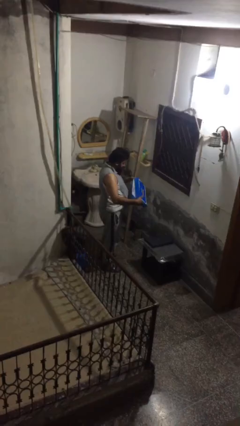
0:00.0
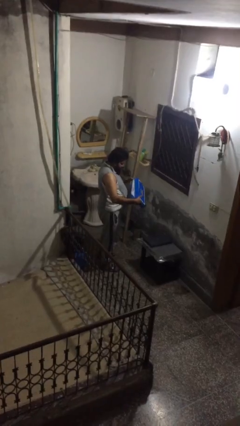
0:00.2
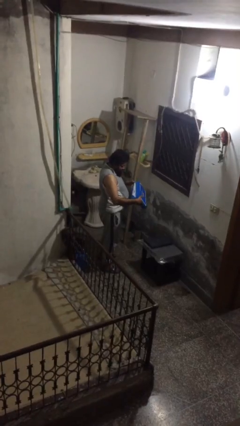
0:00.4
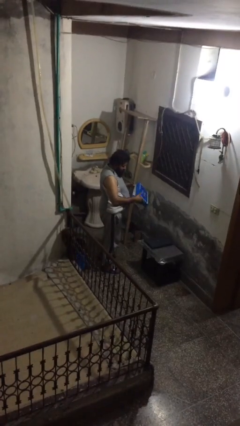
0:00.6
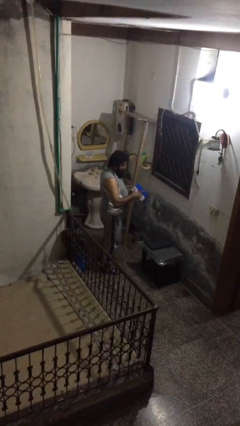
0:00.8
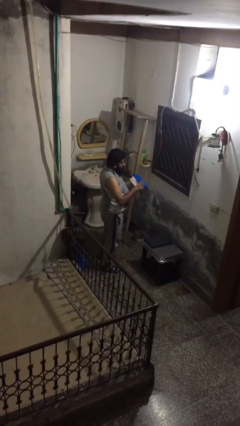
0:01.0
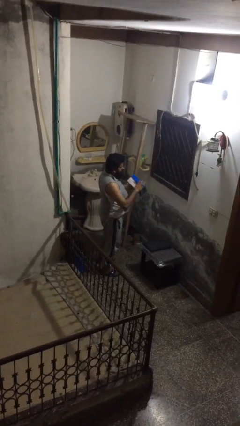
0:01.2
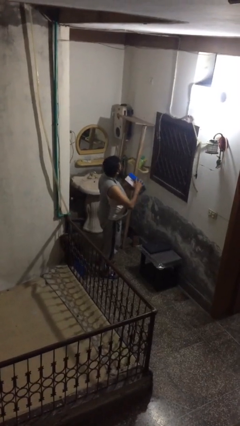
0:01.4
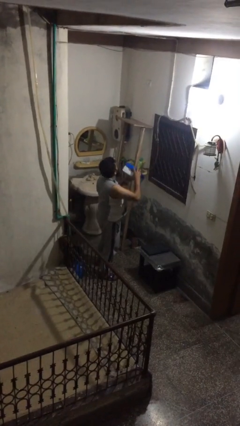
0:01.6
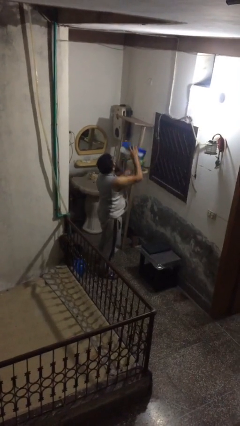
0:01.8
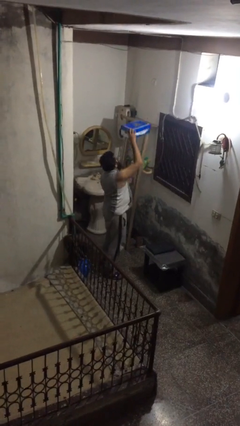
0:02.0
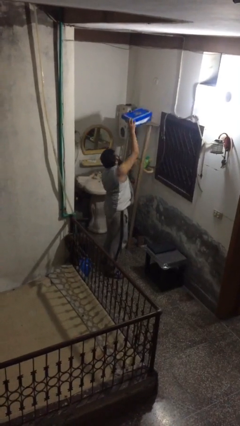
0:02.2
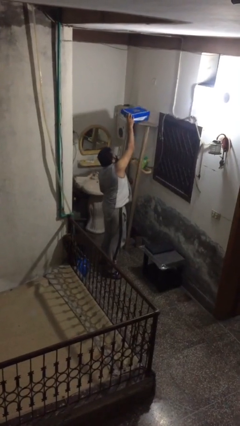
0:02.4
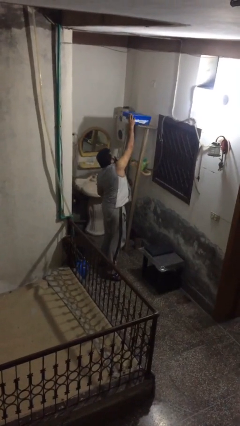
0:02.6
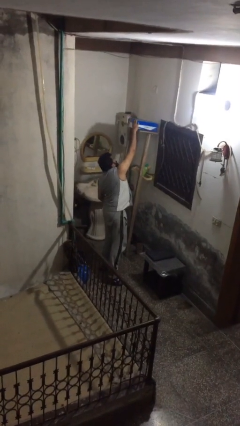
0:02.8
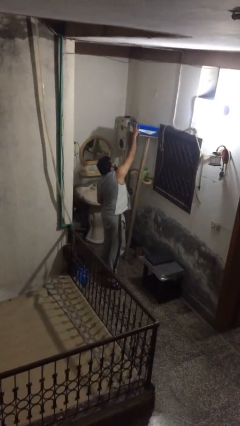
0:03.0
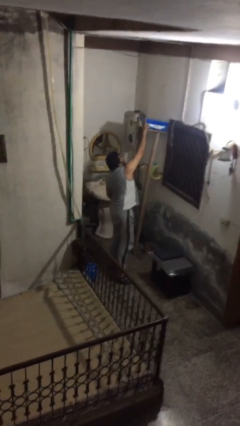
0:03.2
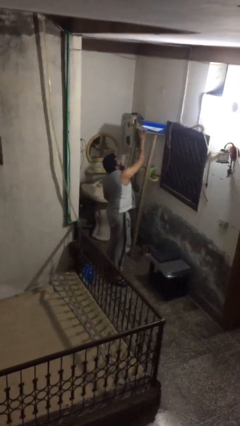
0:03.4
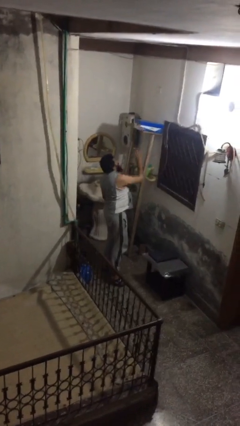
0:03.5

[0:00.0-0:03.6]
person puts down object on shelf

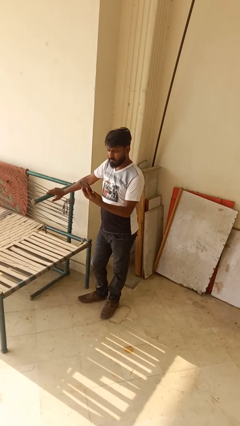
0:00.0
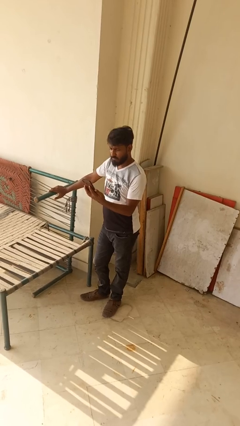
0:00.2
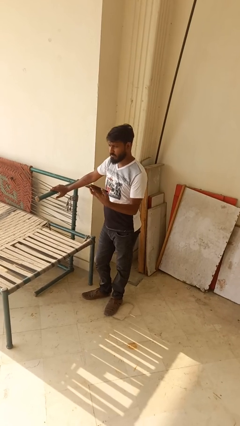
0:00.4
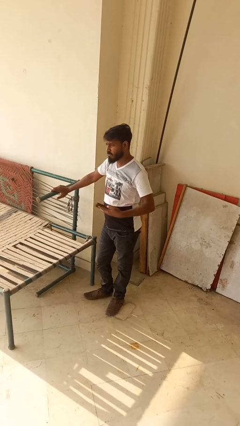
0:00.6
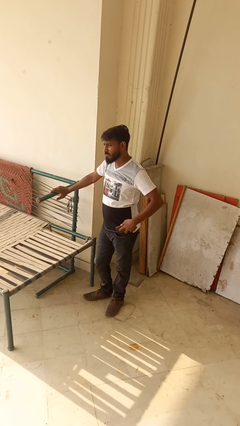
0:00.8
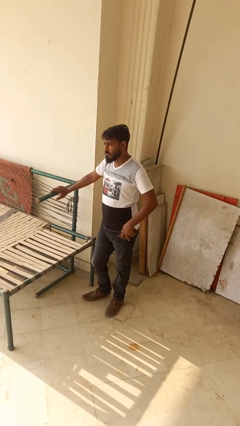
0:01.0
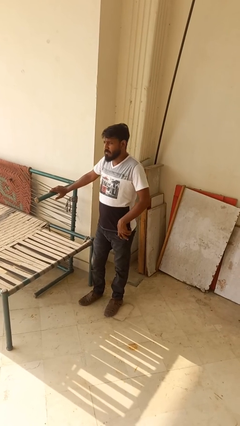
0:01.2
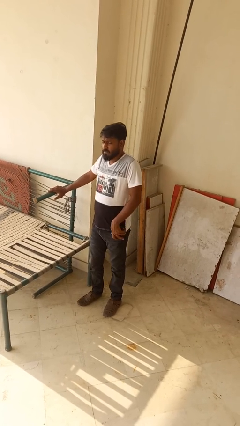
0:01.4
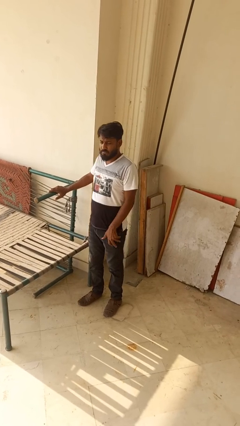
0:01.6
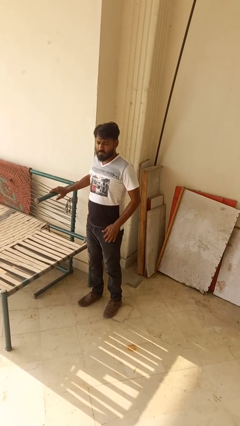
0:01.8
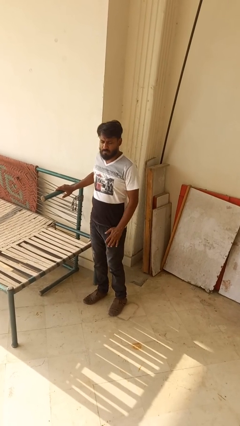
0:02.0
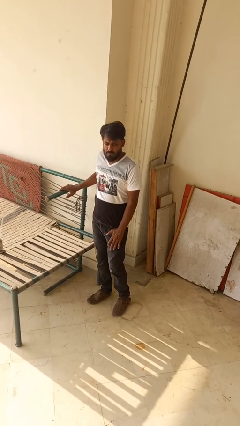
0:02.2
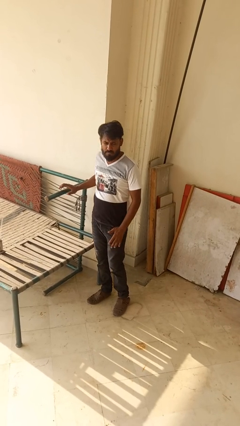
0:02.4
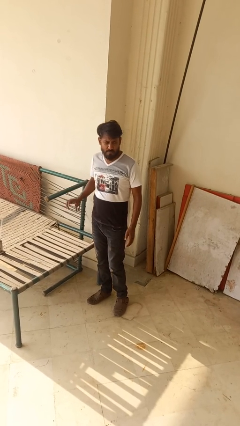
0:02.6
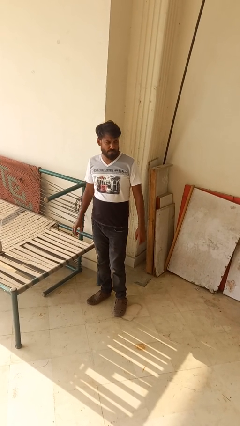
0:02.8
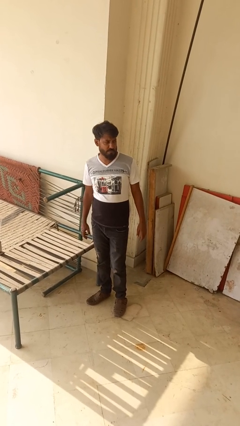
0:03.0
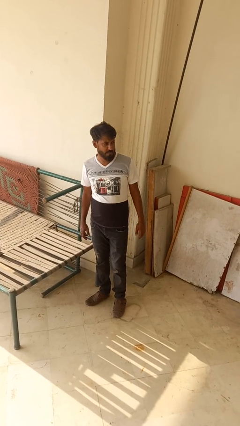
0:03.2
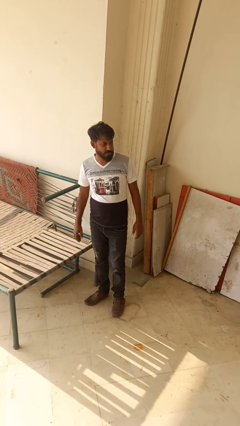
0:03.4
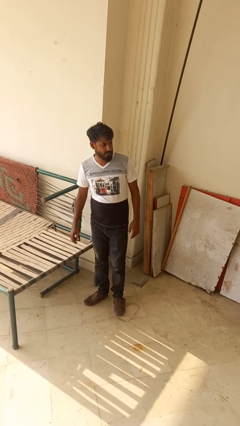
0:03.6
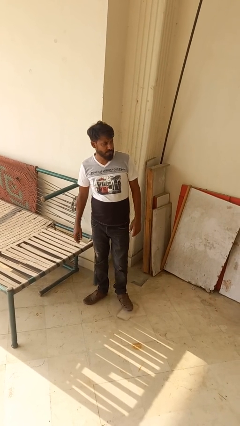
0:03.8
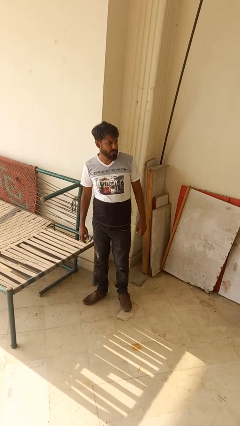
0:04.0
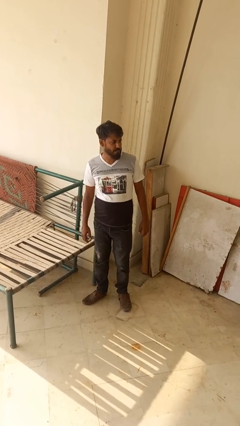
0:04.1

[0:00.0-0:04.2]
person puts phone into pocket

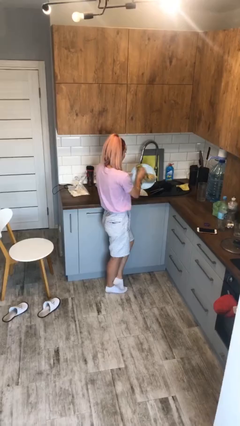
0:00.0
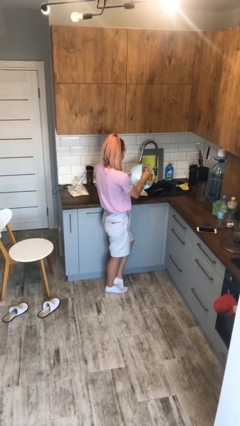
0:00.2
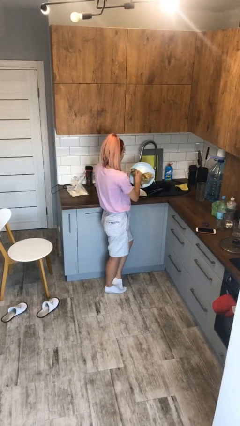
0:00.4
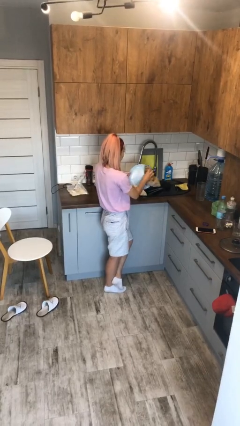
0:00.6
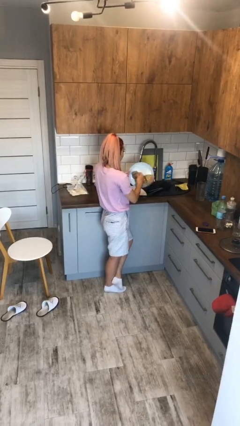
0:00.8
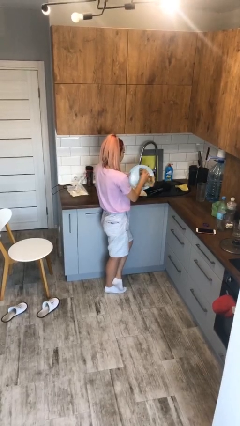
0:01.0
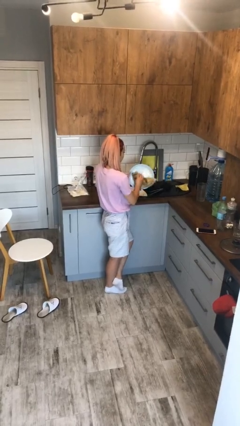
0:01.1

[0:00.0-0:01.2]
person dries dish

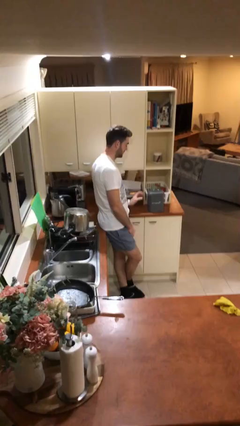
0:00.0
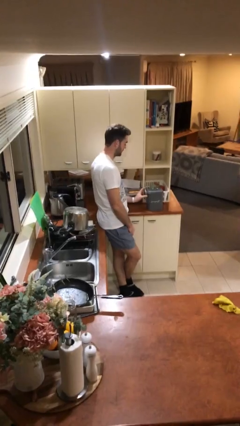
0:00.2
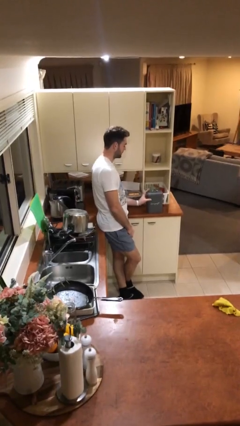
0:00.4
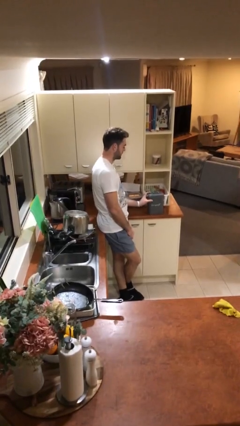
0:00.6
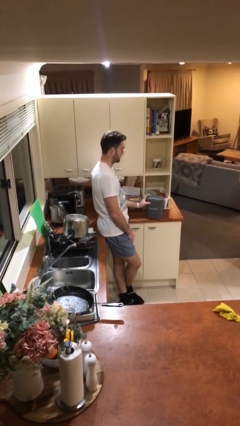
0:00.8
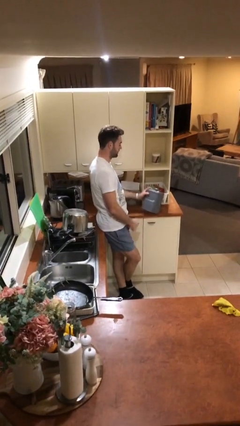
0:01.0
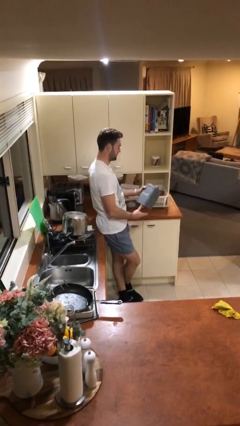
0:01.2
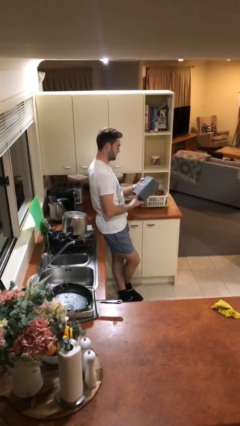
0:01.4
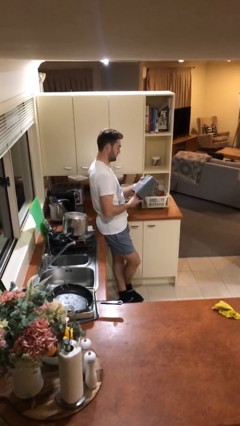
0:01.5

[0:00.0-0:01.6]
person picks up object from table

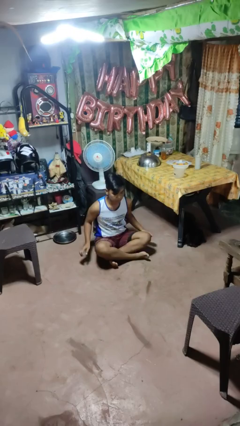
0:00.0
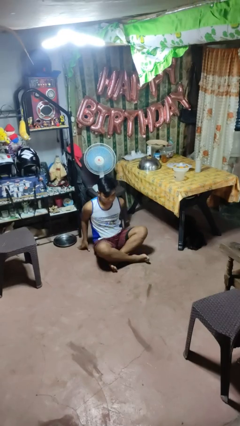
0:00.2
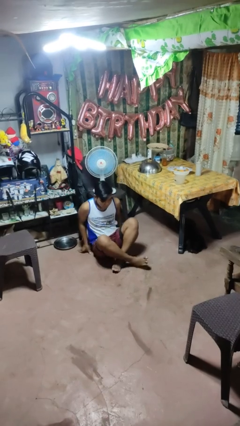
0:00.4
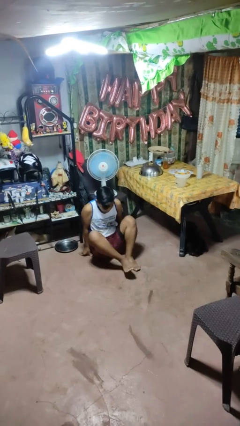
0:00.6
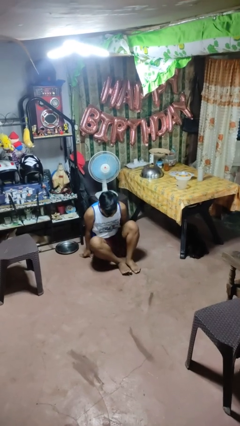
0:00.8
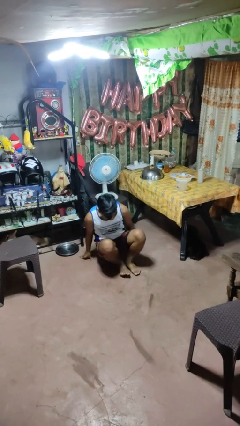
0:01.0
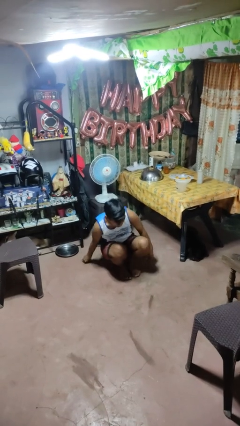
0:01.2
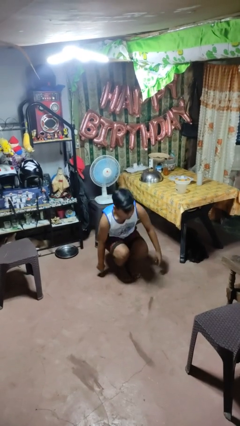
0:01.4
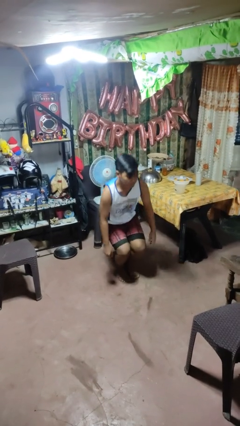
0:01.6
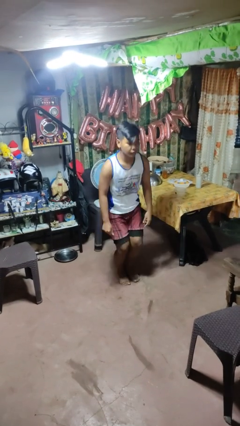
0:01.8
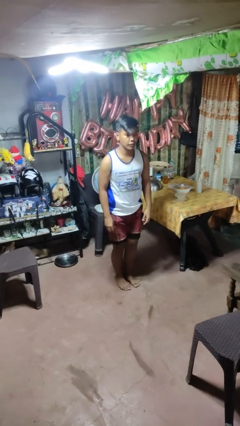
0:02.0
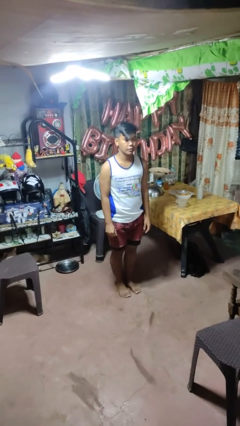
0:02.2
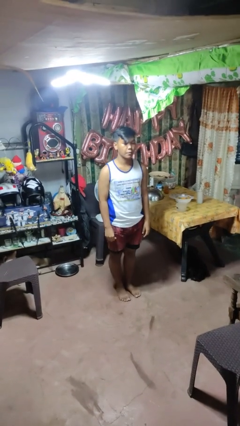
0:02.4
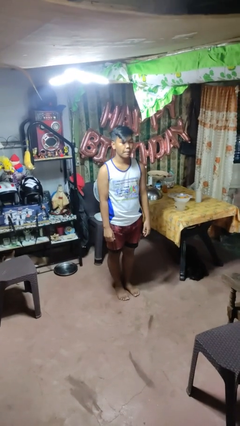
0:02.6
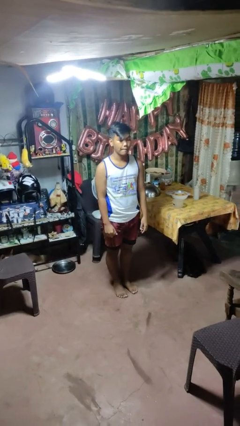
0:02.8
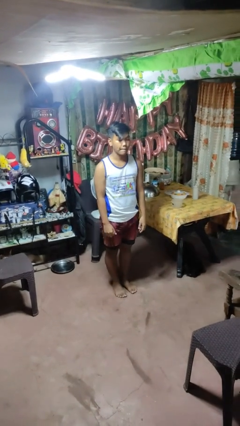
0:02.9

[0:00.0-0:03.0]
person stands up from floor

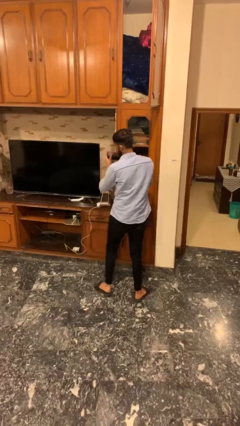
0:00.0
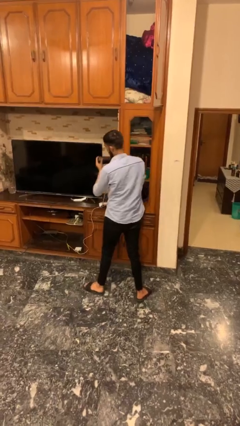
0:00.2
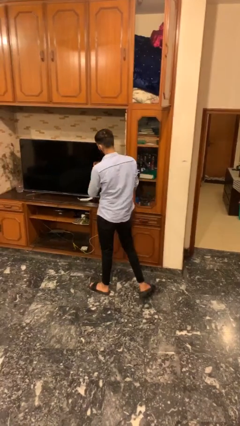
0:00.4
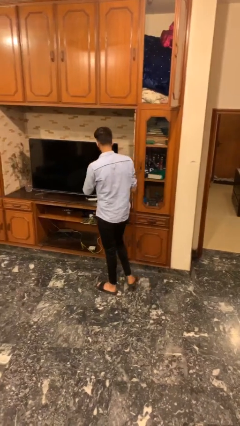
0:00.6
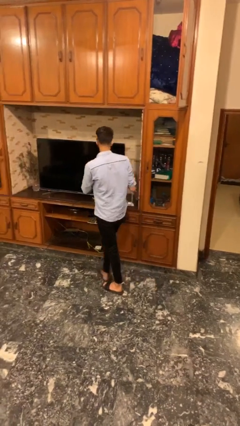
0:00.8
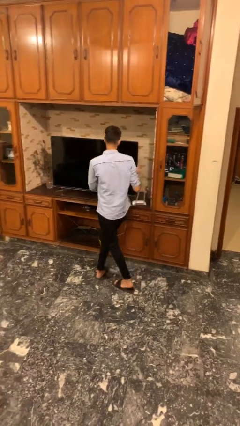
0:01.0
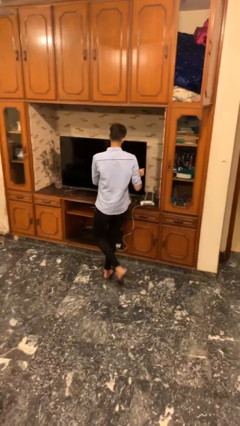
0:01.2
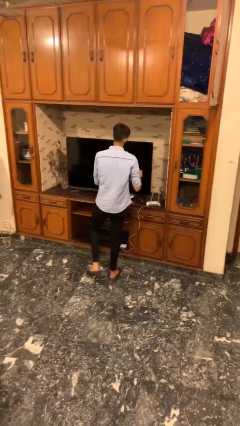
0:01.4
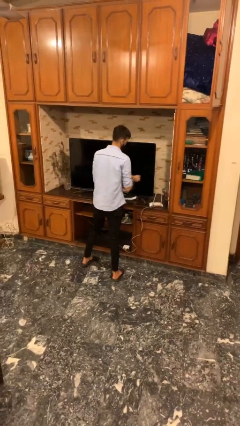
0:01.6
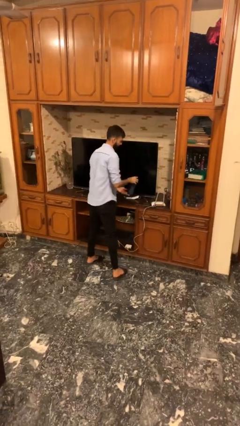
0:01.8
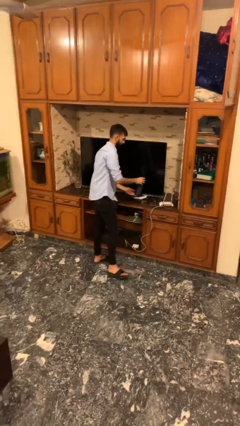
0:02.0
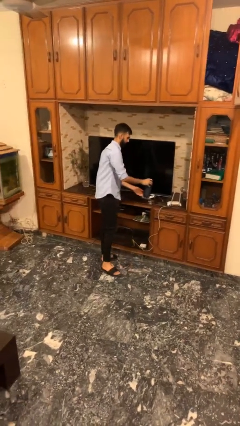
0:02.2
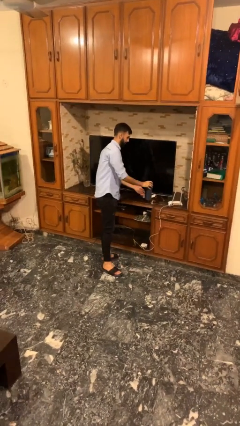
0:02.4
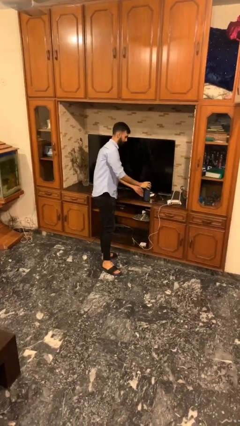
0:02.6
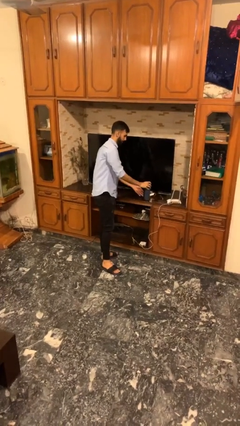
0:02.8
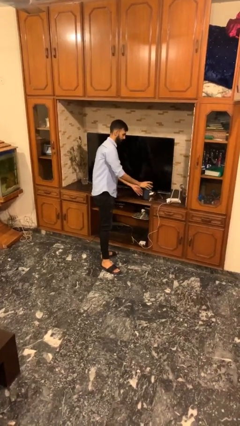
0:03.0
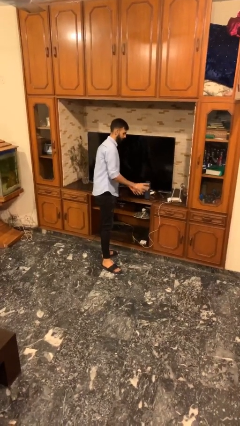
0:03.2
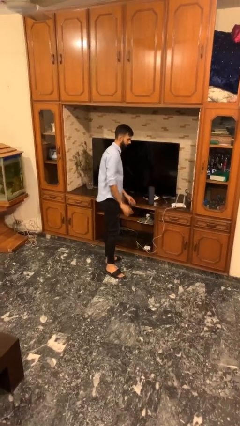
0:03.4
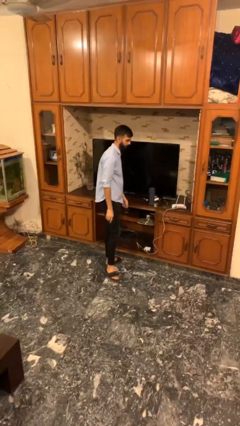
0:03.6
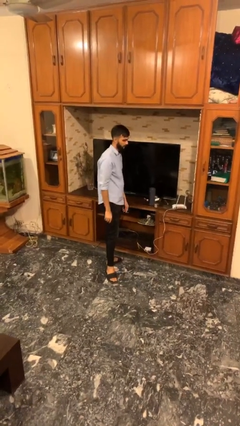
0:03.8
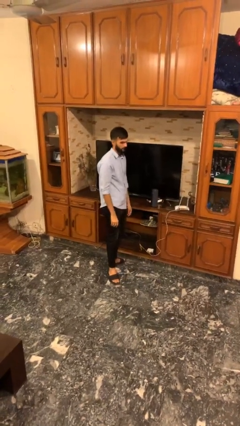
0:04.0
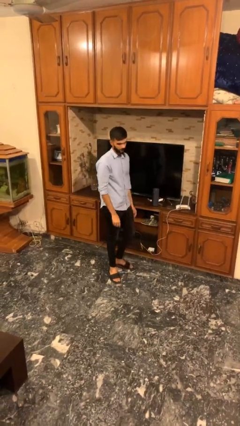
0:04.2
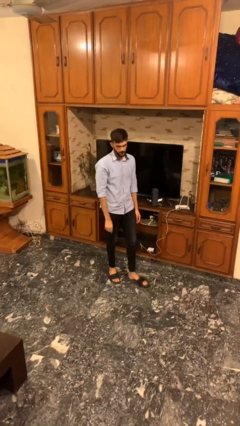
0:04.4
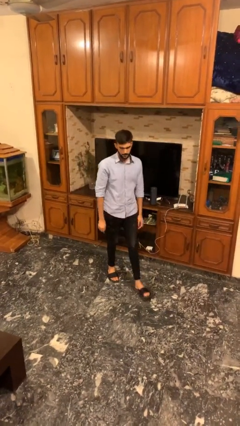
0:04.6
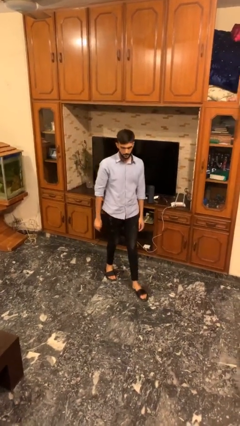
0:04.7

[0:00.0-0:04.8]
person puts down object on table
